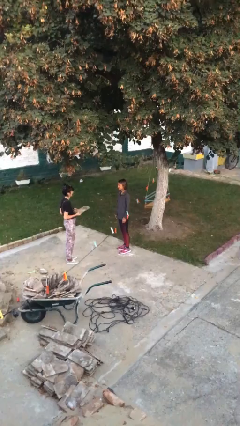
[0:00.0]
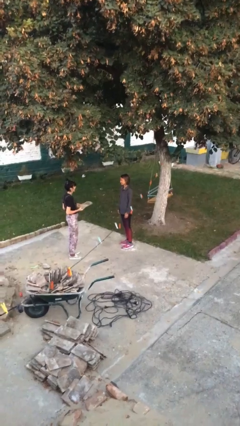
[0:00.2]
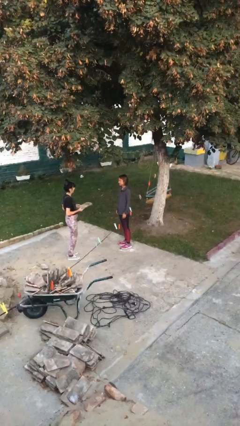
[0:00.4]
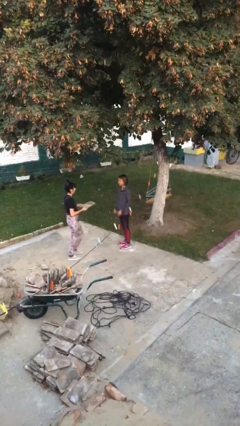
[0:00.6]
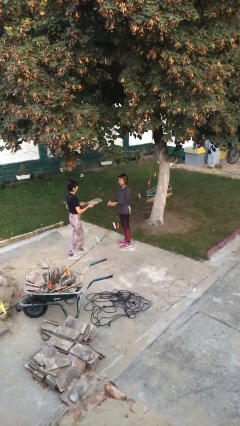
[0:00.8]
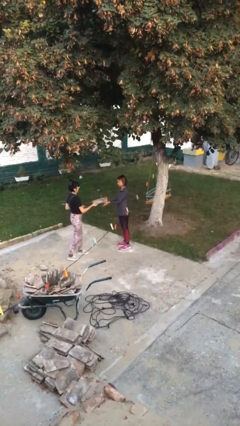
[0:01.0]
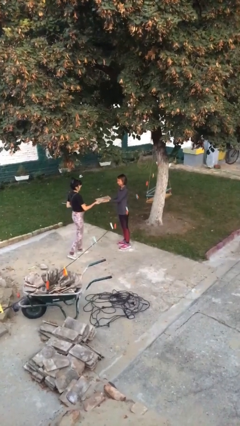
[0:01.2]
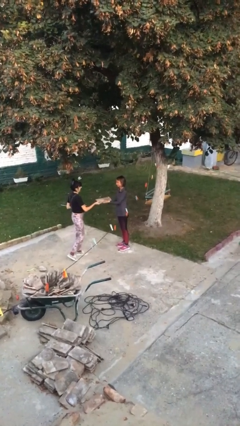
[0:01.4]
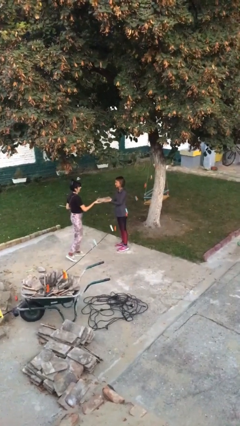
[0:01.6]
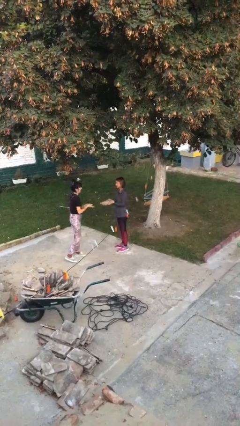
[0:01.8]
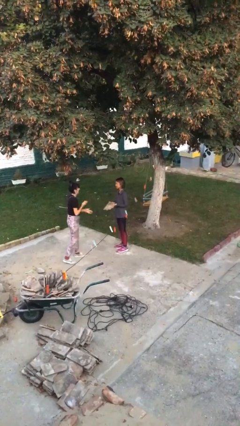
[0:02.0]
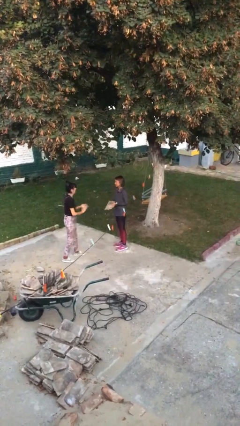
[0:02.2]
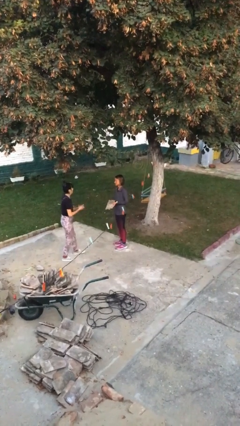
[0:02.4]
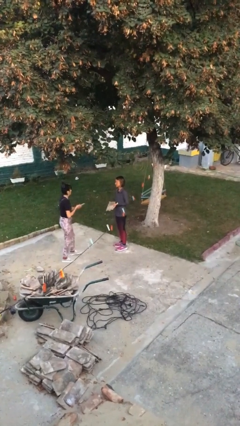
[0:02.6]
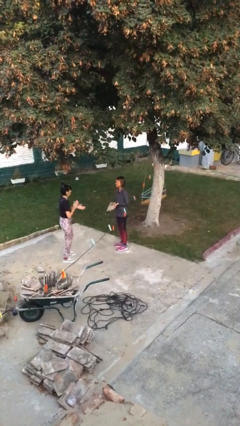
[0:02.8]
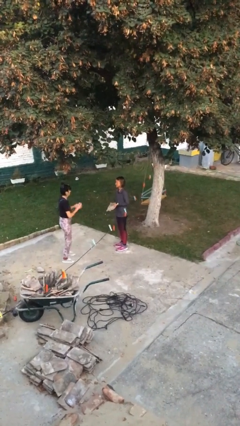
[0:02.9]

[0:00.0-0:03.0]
person transfers object to person

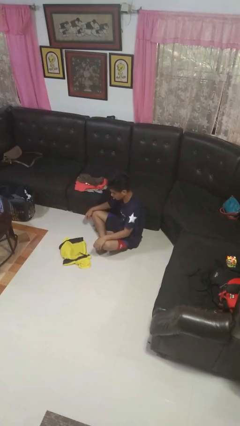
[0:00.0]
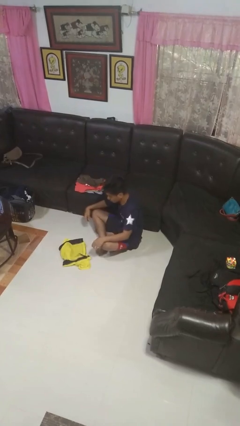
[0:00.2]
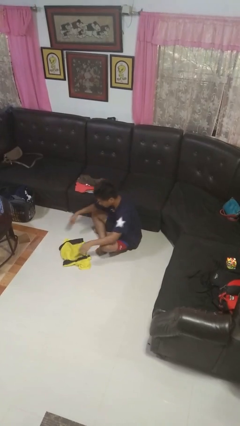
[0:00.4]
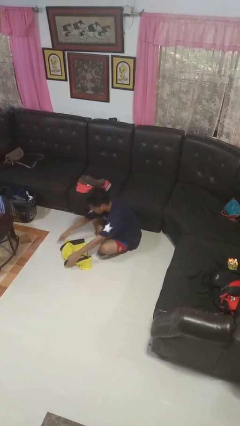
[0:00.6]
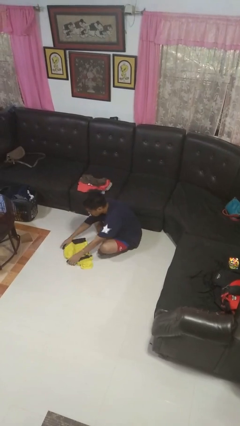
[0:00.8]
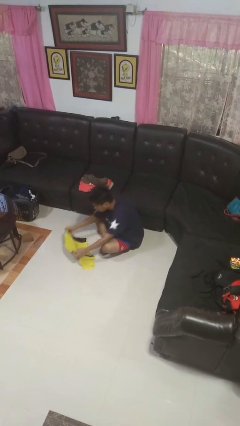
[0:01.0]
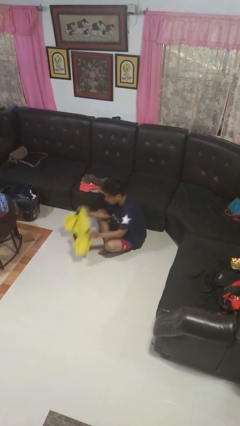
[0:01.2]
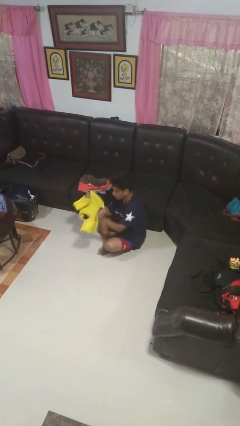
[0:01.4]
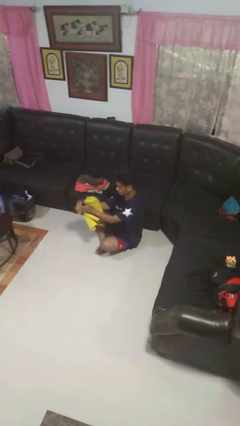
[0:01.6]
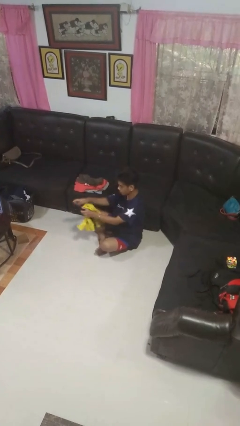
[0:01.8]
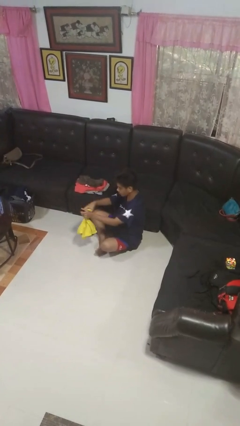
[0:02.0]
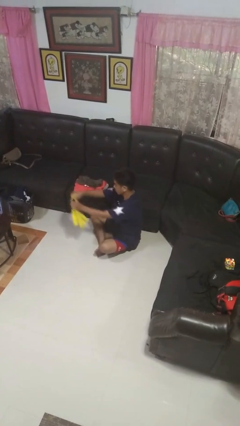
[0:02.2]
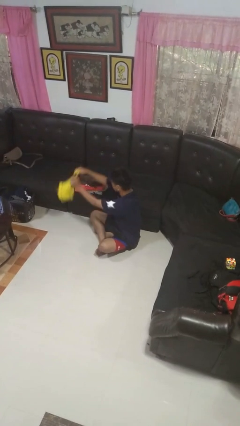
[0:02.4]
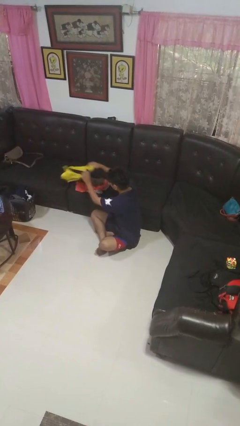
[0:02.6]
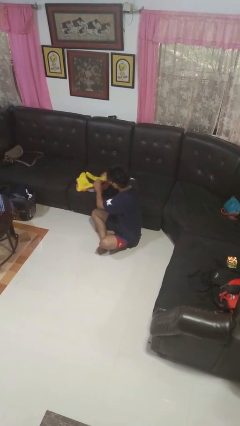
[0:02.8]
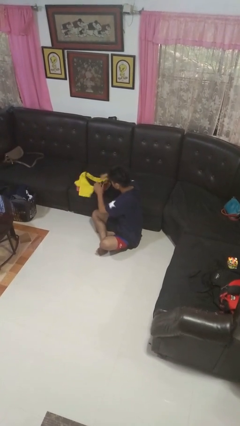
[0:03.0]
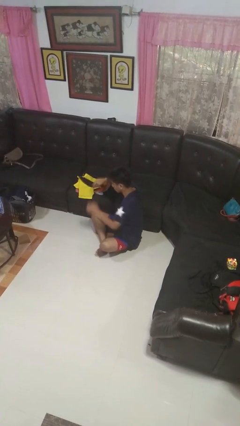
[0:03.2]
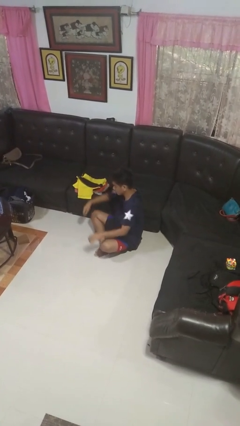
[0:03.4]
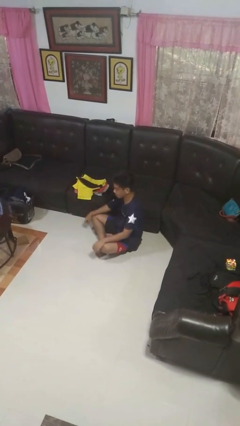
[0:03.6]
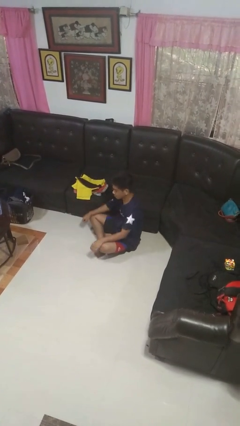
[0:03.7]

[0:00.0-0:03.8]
person folds shirt

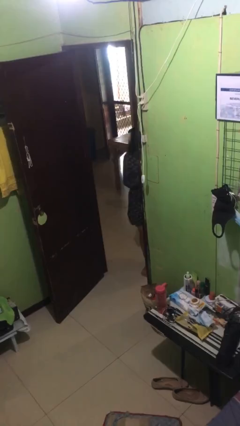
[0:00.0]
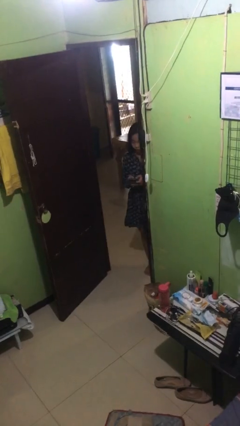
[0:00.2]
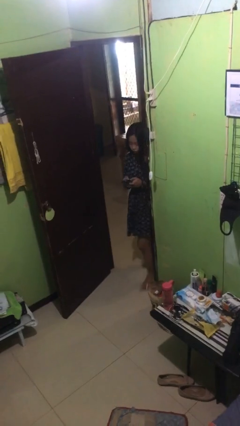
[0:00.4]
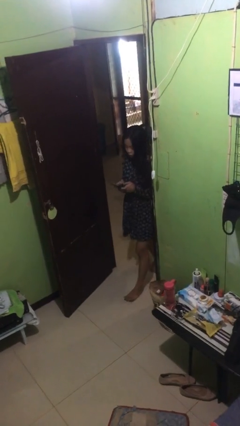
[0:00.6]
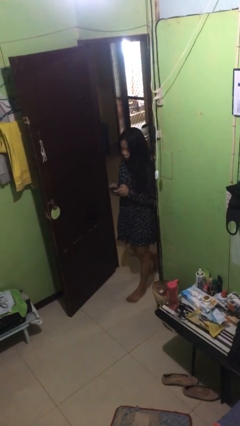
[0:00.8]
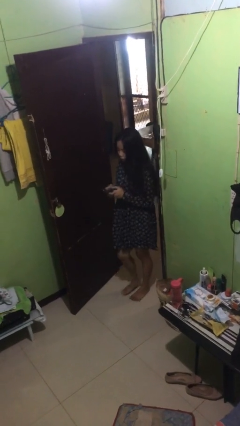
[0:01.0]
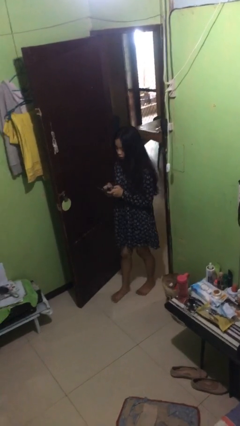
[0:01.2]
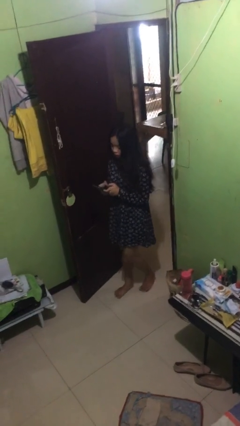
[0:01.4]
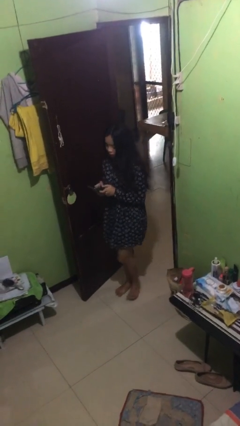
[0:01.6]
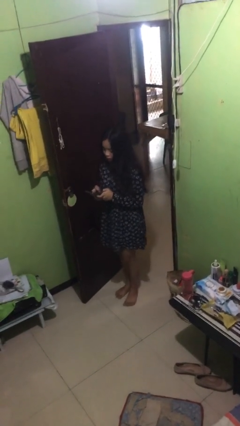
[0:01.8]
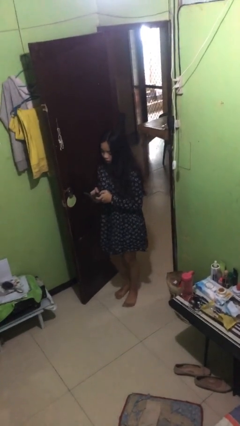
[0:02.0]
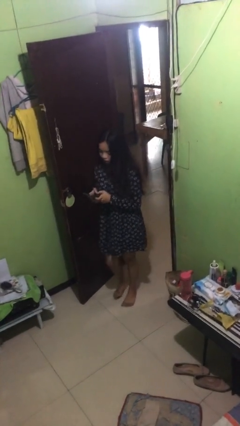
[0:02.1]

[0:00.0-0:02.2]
person enters scene through structure

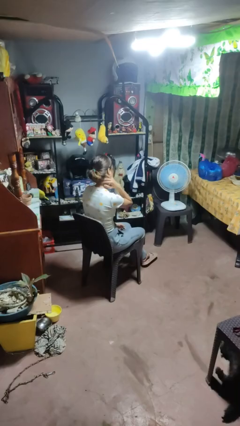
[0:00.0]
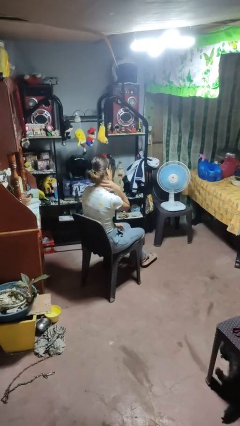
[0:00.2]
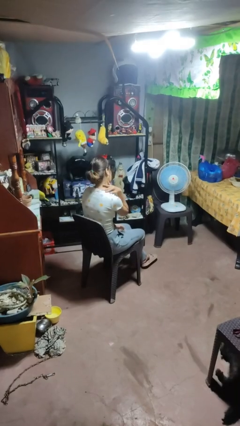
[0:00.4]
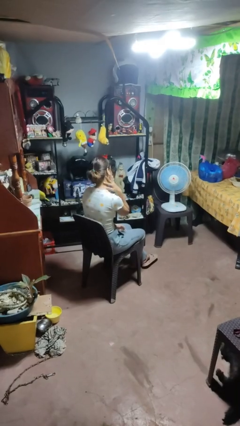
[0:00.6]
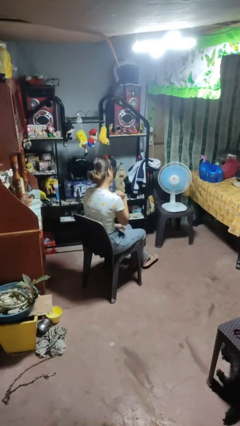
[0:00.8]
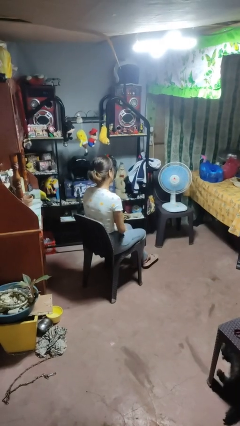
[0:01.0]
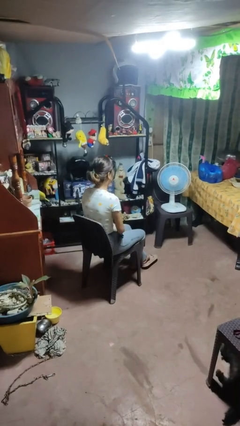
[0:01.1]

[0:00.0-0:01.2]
person rubs neck

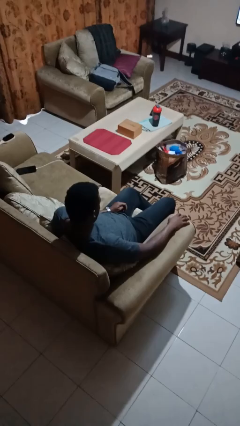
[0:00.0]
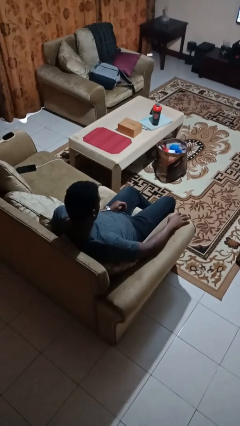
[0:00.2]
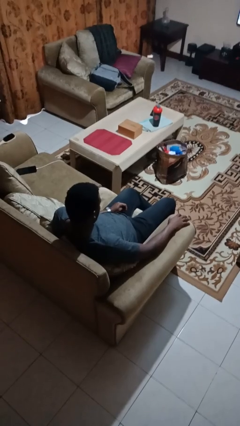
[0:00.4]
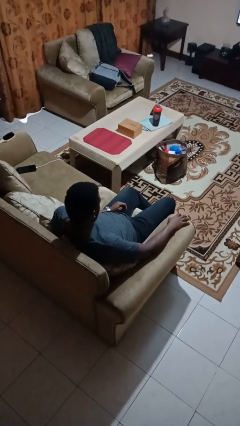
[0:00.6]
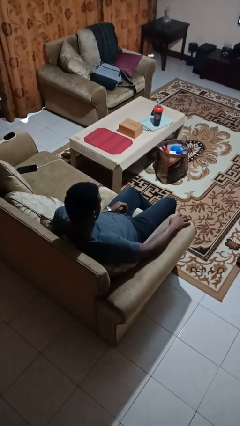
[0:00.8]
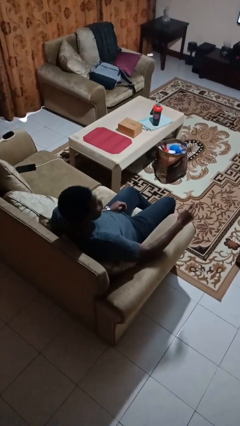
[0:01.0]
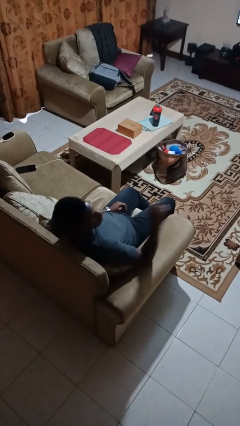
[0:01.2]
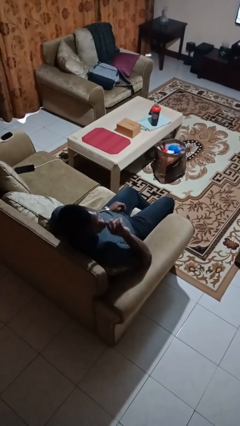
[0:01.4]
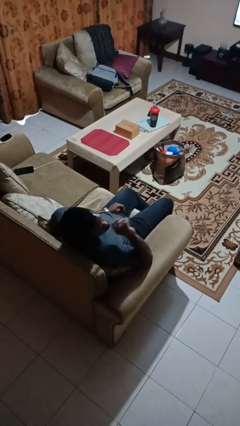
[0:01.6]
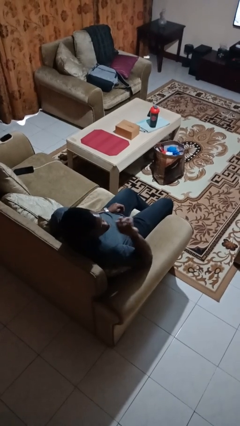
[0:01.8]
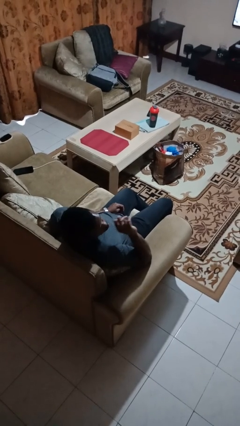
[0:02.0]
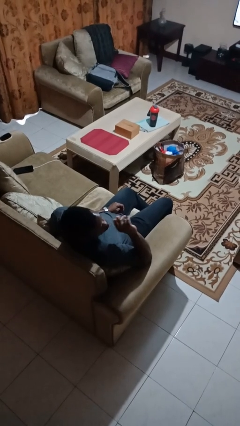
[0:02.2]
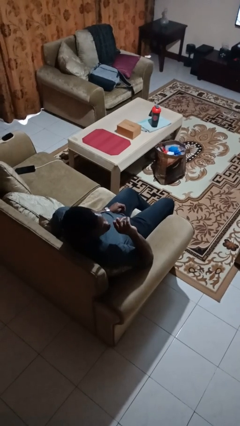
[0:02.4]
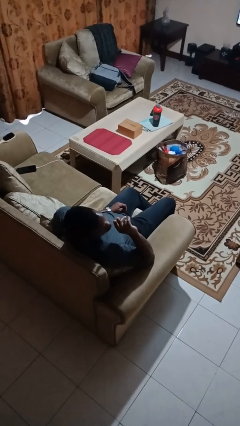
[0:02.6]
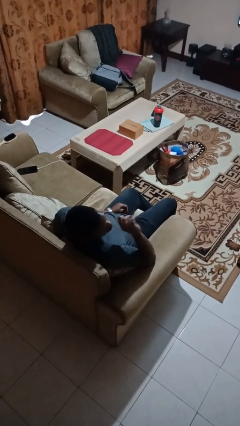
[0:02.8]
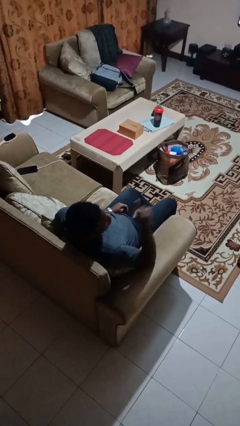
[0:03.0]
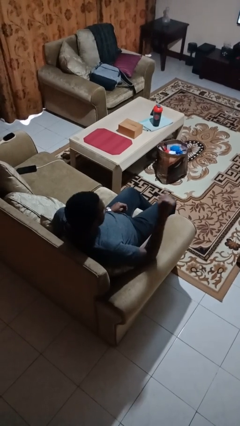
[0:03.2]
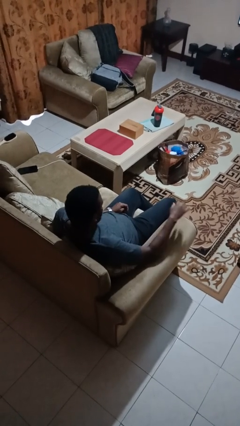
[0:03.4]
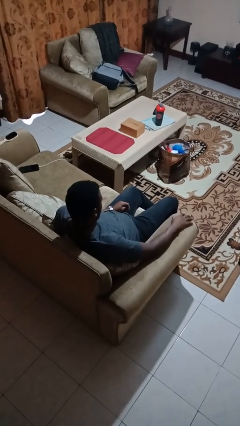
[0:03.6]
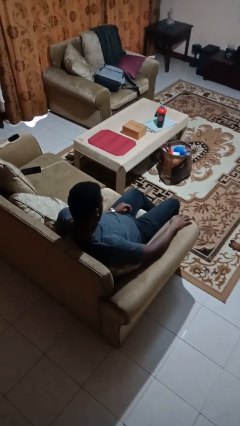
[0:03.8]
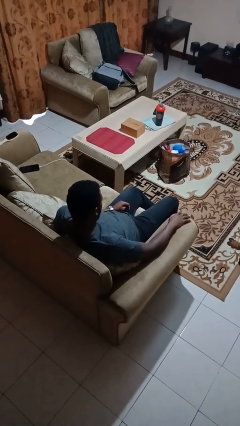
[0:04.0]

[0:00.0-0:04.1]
person gestures be quiet

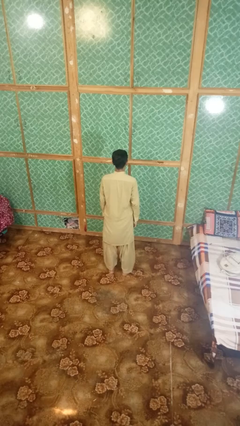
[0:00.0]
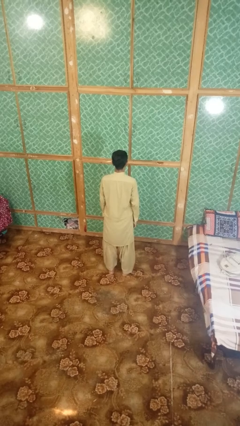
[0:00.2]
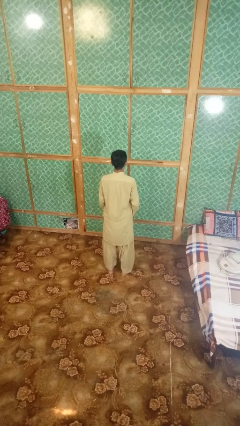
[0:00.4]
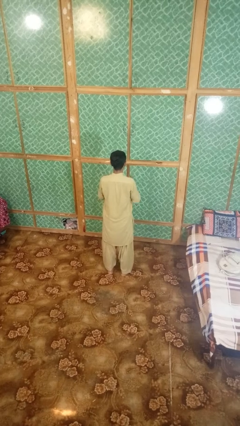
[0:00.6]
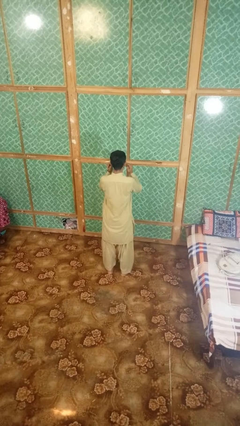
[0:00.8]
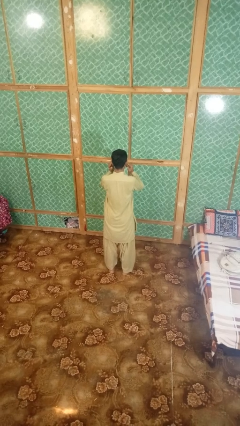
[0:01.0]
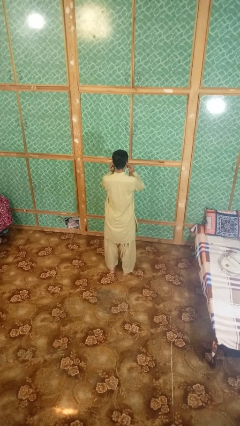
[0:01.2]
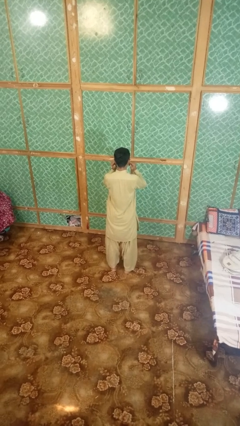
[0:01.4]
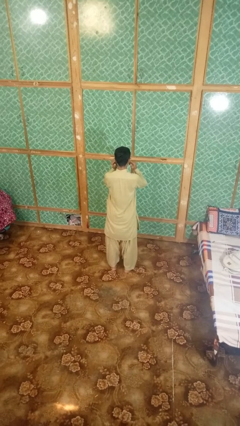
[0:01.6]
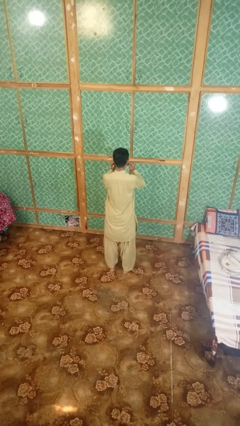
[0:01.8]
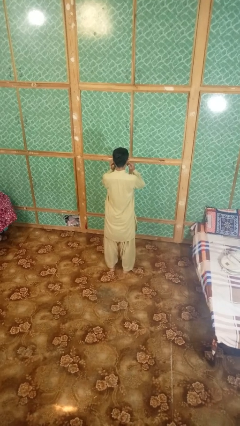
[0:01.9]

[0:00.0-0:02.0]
person puts fingers in ear

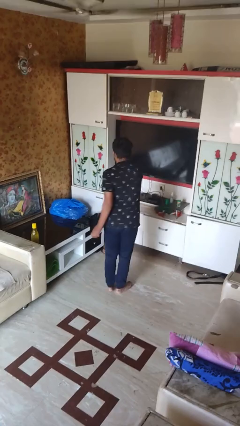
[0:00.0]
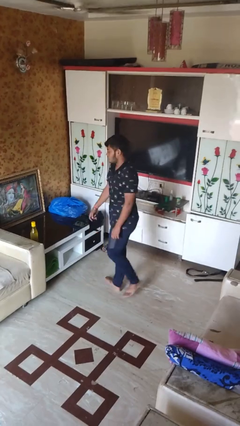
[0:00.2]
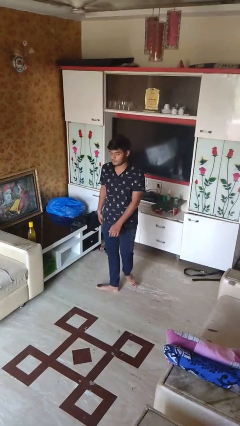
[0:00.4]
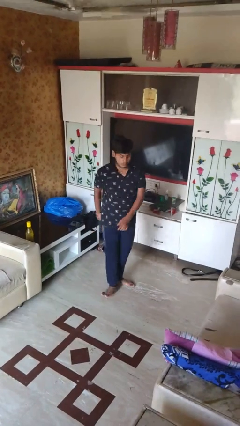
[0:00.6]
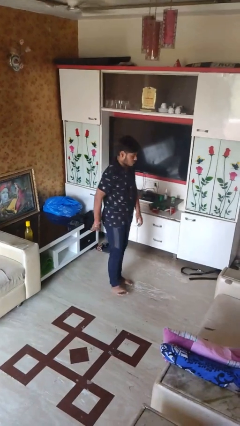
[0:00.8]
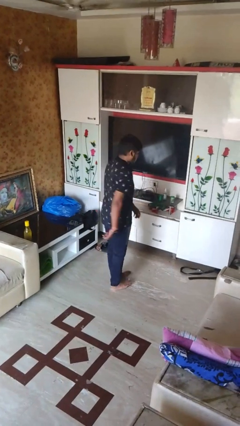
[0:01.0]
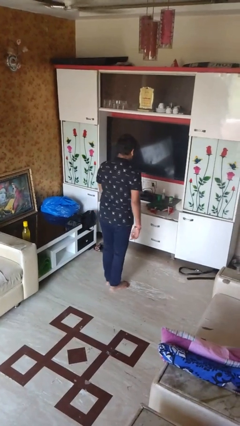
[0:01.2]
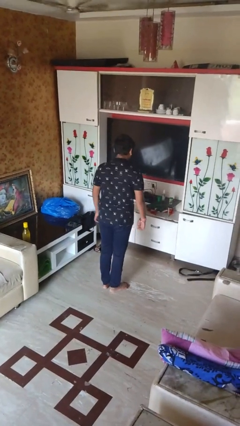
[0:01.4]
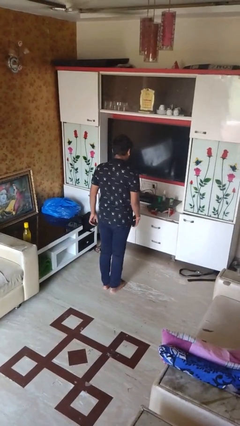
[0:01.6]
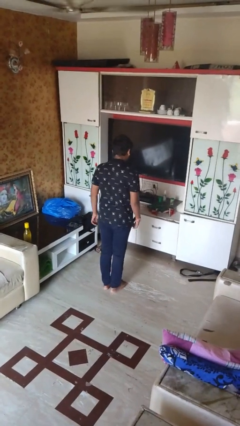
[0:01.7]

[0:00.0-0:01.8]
person twirls
